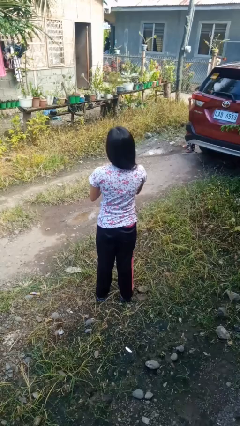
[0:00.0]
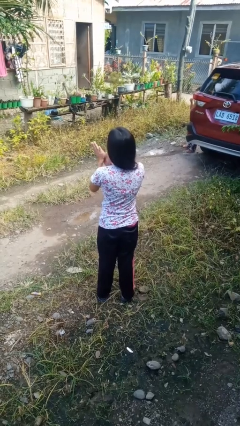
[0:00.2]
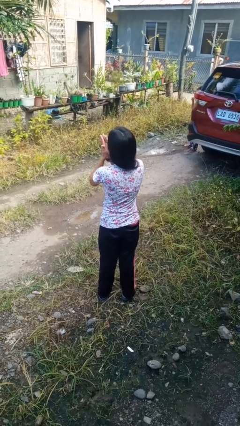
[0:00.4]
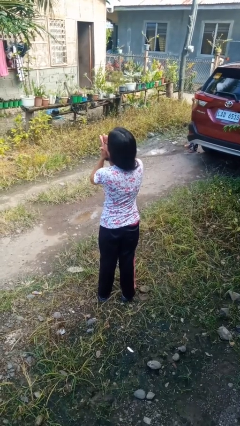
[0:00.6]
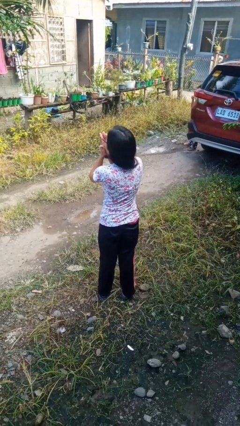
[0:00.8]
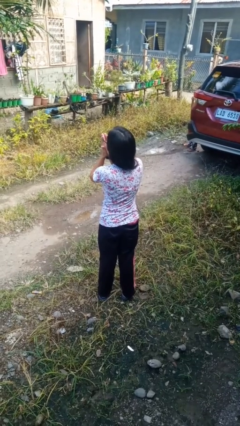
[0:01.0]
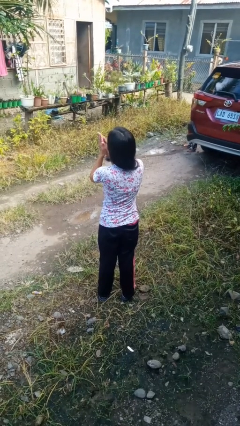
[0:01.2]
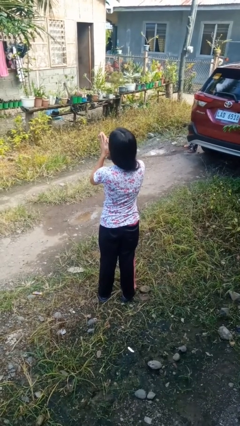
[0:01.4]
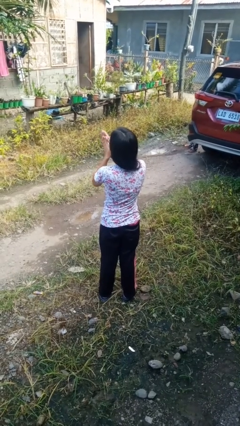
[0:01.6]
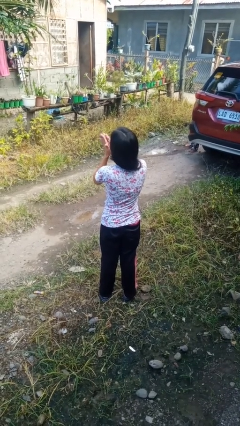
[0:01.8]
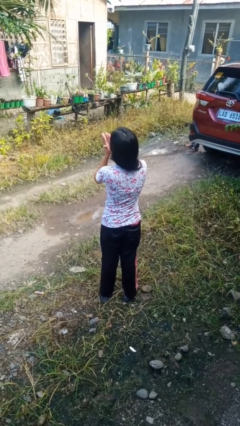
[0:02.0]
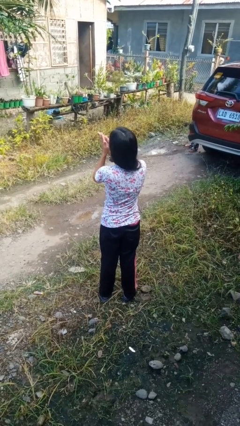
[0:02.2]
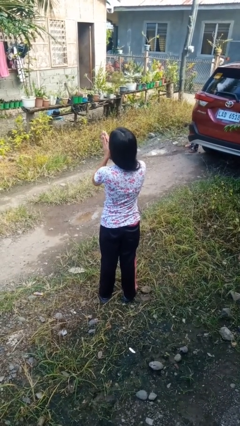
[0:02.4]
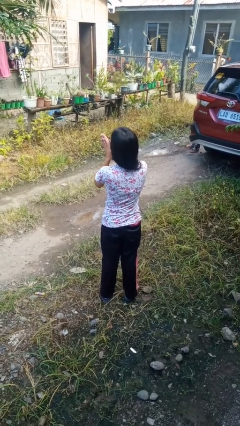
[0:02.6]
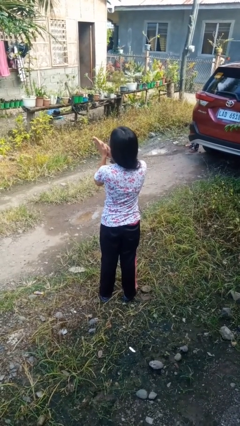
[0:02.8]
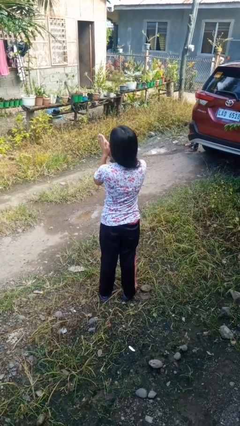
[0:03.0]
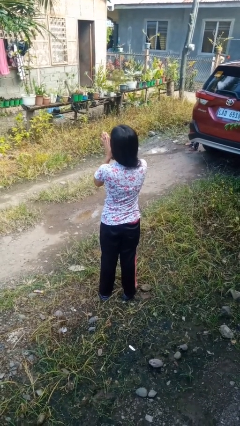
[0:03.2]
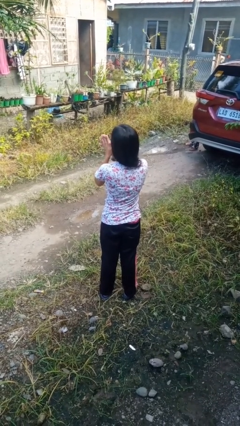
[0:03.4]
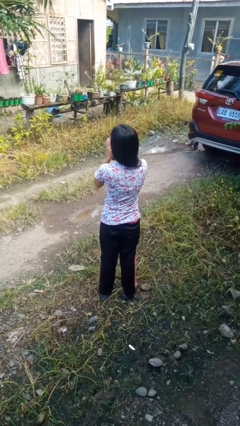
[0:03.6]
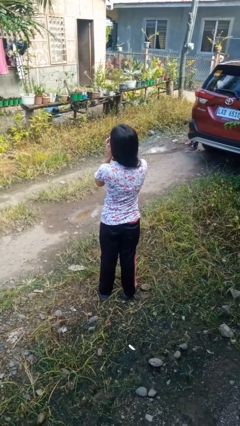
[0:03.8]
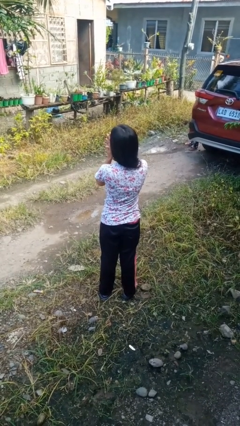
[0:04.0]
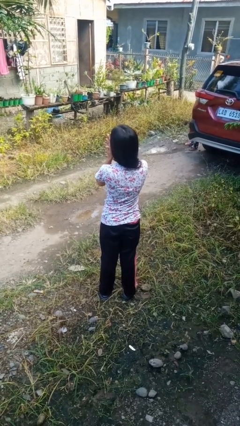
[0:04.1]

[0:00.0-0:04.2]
person blows into hands

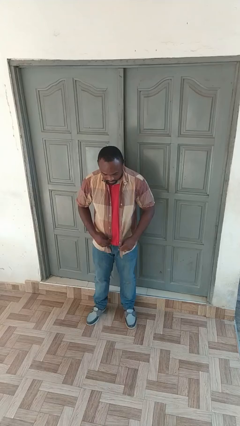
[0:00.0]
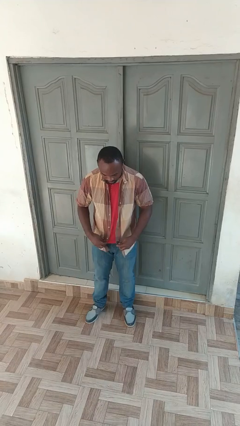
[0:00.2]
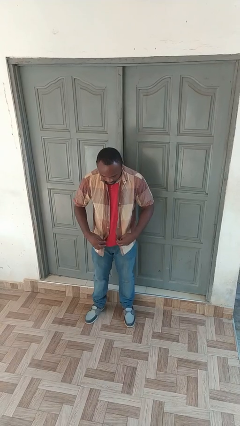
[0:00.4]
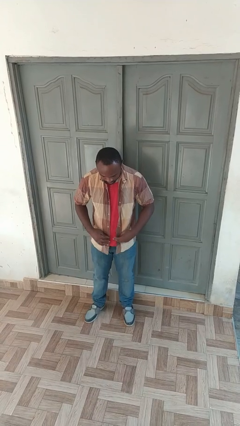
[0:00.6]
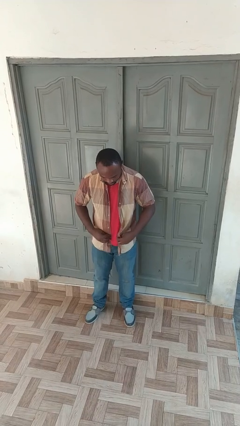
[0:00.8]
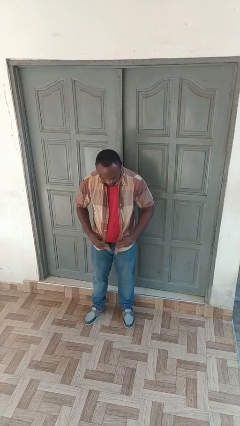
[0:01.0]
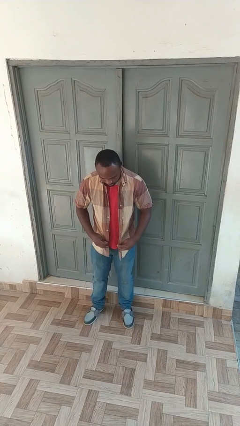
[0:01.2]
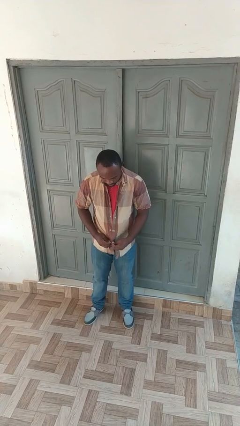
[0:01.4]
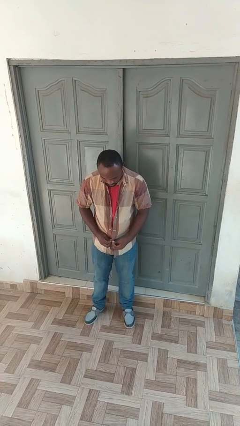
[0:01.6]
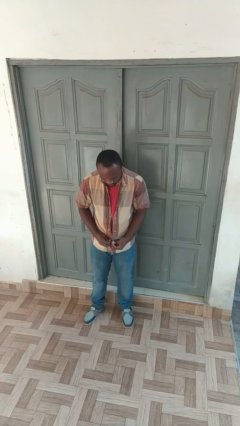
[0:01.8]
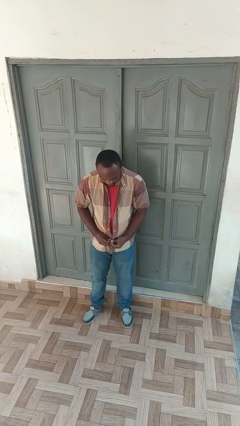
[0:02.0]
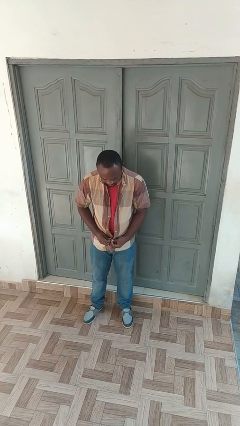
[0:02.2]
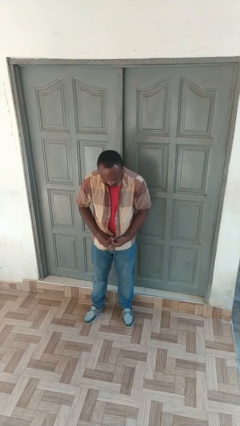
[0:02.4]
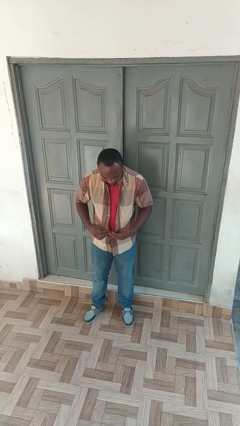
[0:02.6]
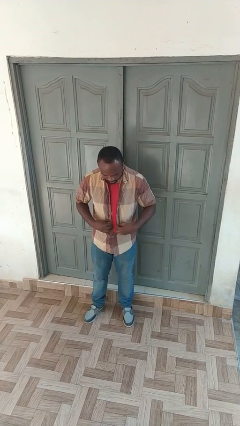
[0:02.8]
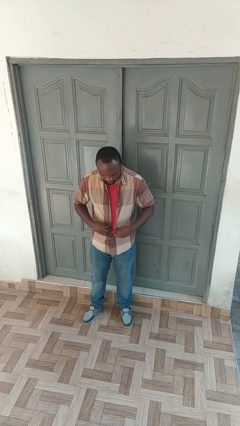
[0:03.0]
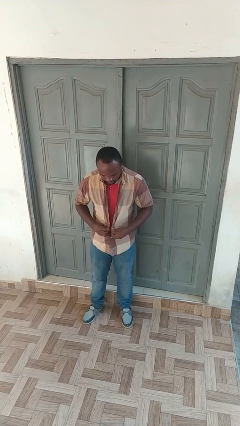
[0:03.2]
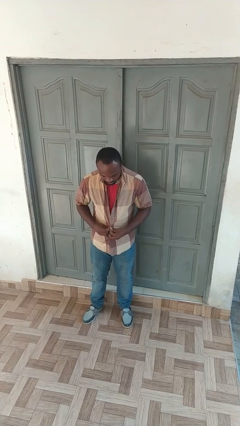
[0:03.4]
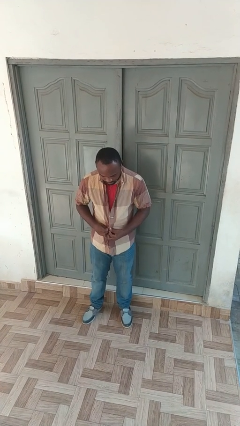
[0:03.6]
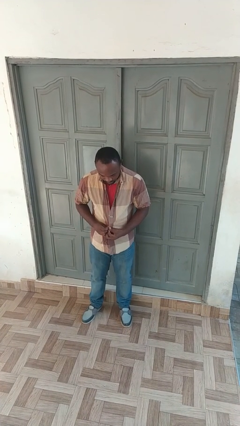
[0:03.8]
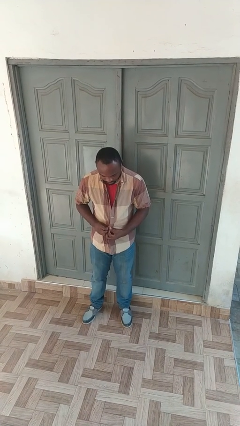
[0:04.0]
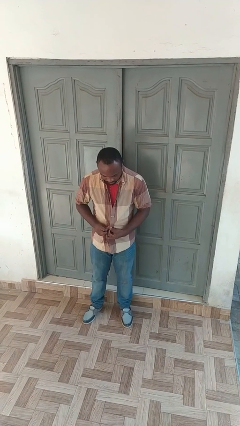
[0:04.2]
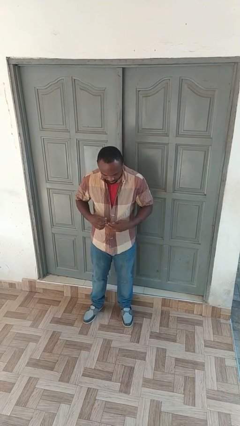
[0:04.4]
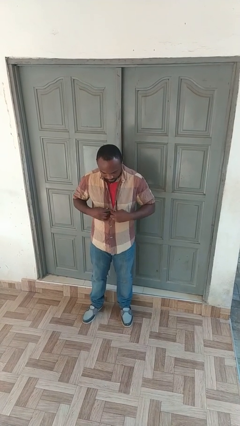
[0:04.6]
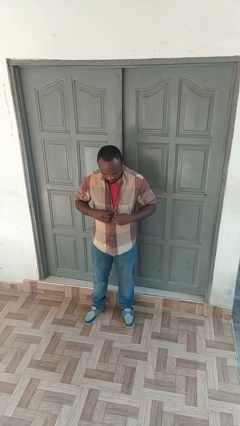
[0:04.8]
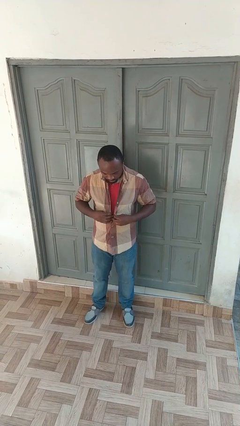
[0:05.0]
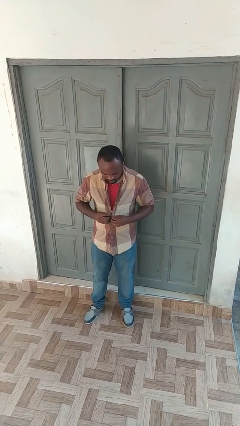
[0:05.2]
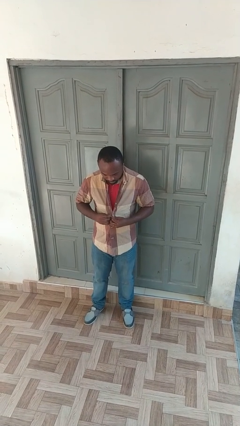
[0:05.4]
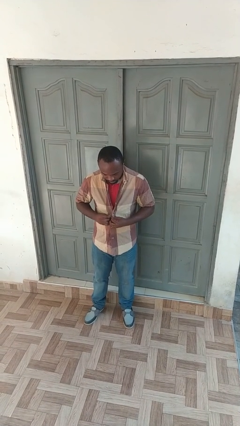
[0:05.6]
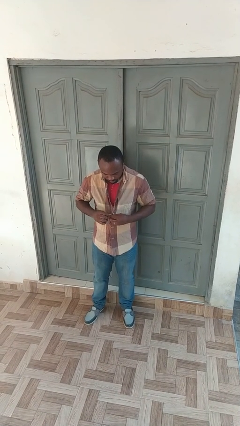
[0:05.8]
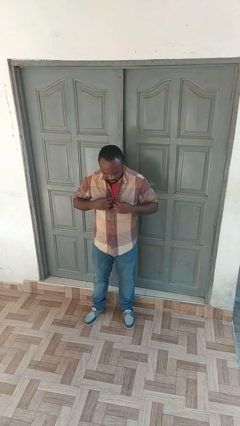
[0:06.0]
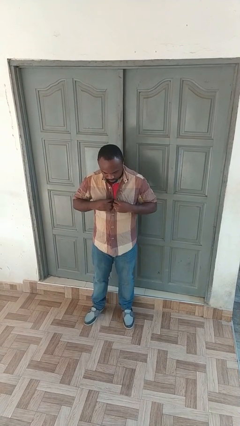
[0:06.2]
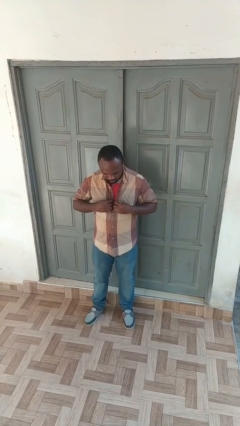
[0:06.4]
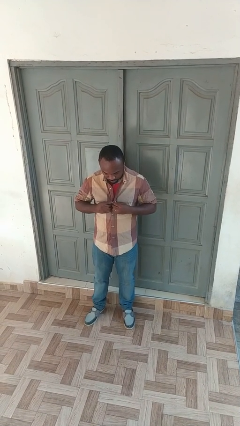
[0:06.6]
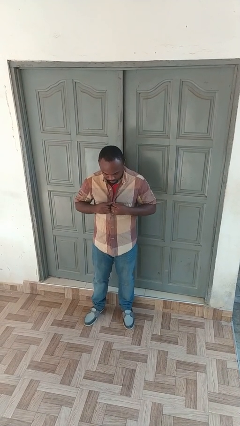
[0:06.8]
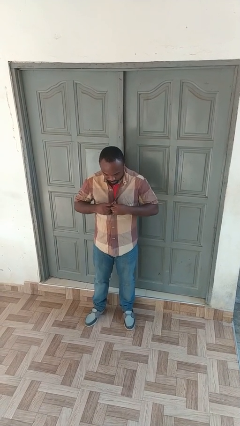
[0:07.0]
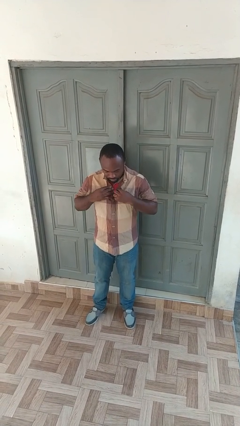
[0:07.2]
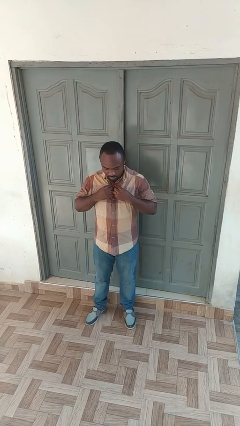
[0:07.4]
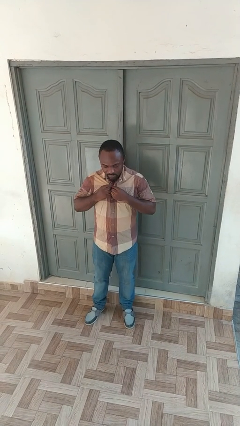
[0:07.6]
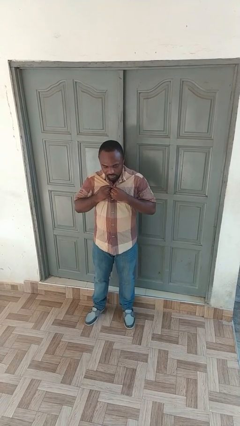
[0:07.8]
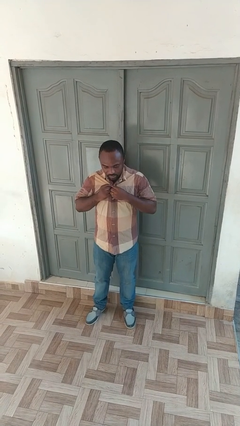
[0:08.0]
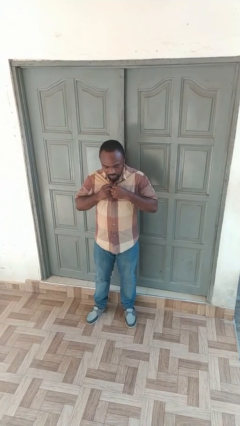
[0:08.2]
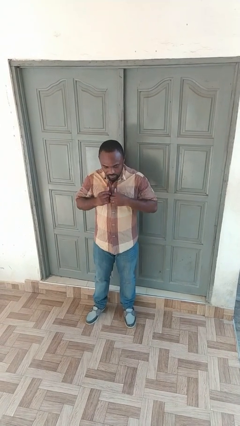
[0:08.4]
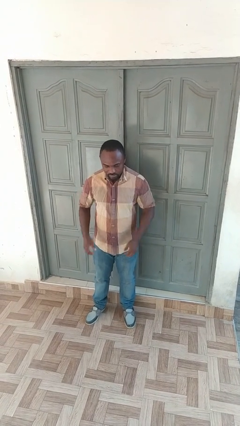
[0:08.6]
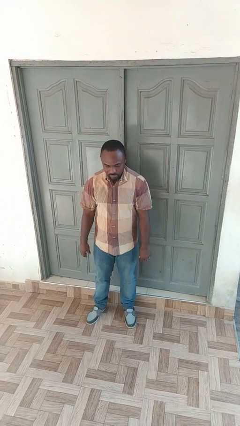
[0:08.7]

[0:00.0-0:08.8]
person buttons shirt

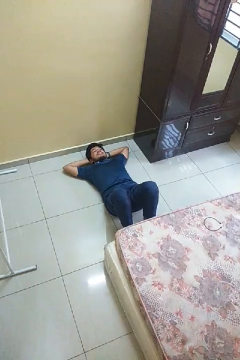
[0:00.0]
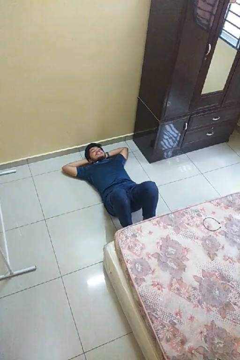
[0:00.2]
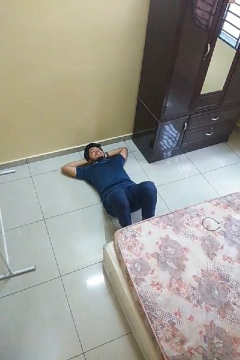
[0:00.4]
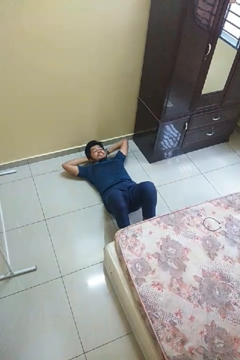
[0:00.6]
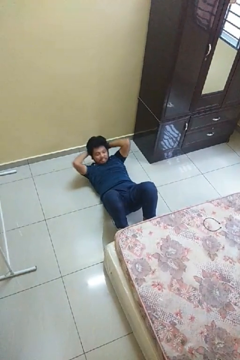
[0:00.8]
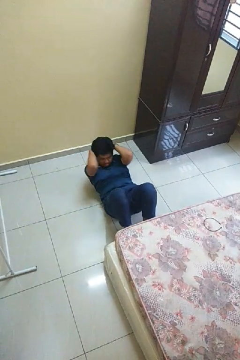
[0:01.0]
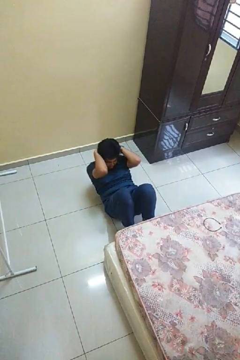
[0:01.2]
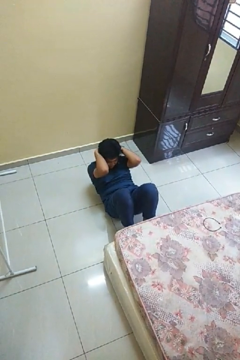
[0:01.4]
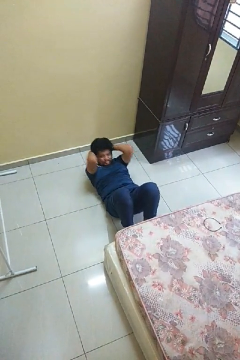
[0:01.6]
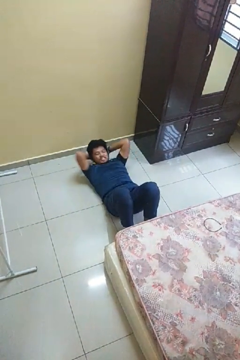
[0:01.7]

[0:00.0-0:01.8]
person exercises with situp

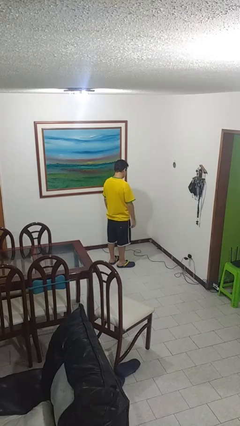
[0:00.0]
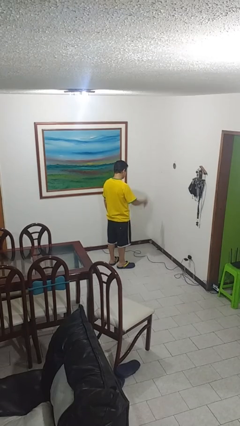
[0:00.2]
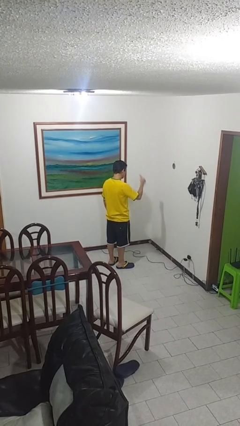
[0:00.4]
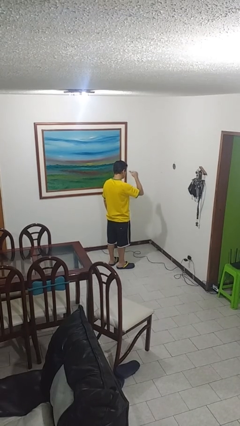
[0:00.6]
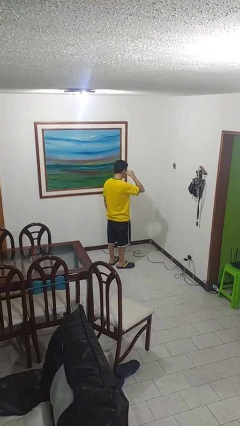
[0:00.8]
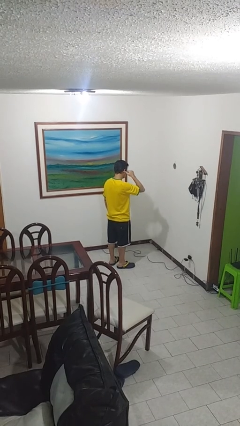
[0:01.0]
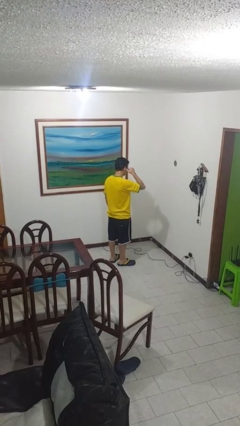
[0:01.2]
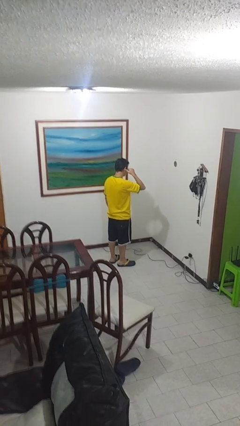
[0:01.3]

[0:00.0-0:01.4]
person gestures call me

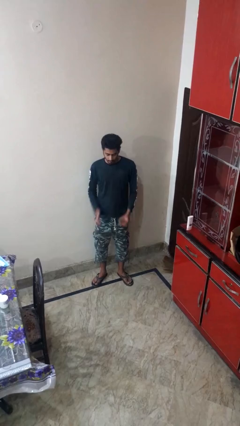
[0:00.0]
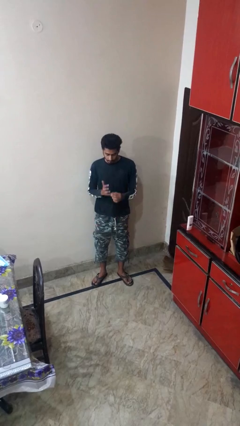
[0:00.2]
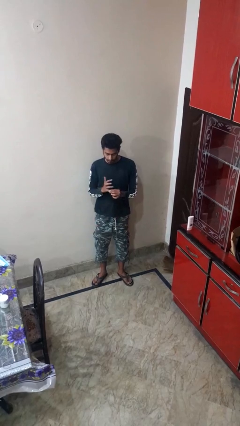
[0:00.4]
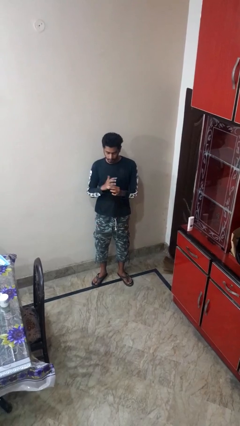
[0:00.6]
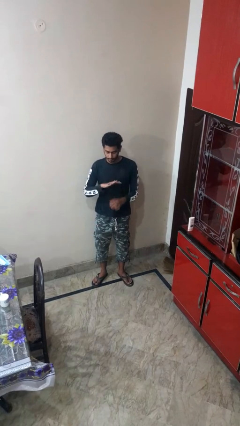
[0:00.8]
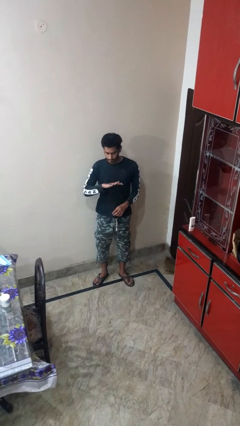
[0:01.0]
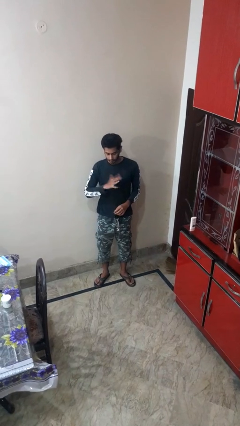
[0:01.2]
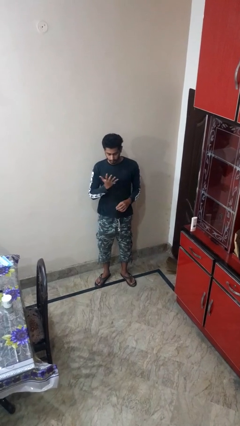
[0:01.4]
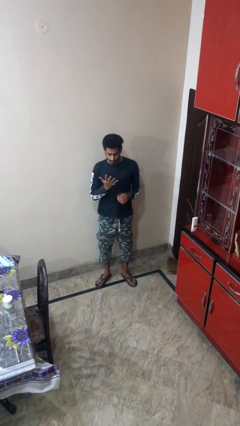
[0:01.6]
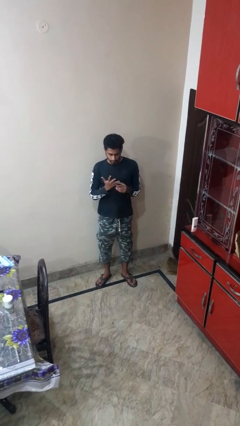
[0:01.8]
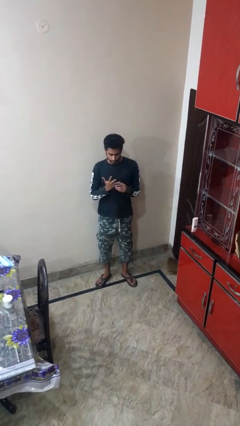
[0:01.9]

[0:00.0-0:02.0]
person puts on ring

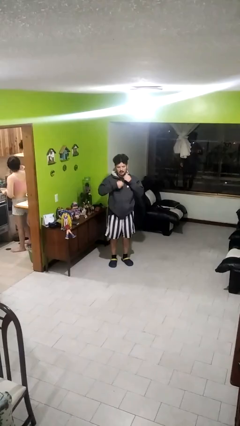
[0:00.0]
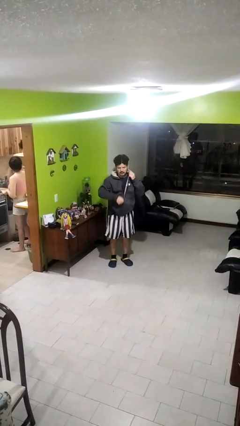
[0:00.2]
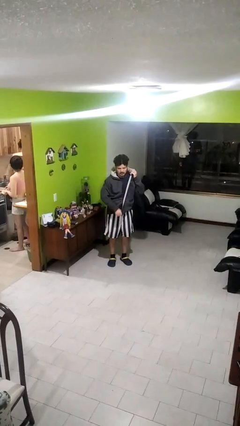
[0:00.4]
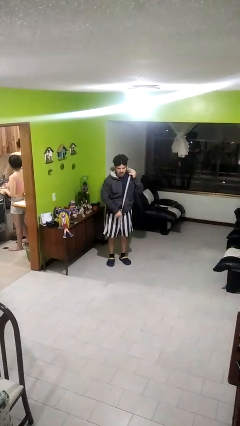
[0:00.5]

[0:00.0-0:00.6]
person unzips jacket